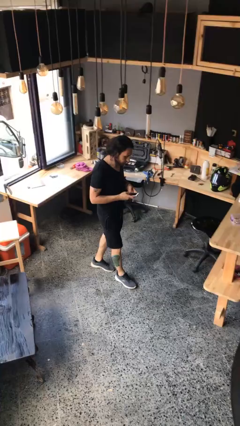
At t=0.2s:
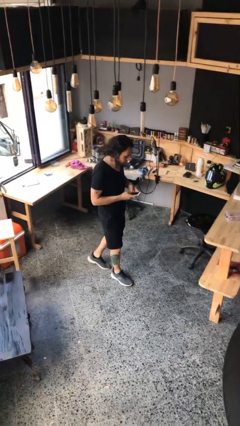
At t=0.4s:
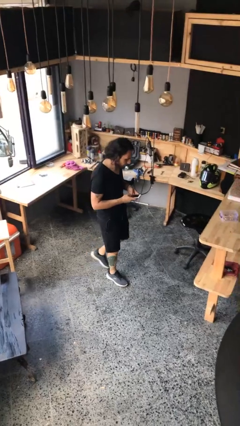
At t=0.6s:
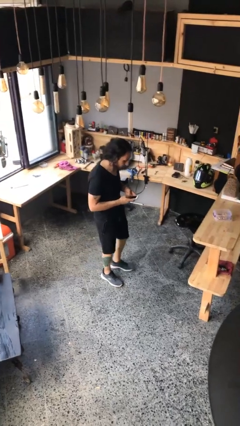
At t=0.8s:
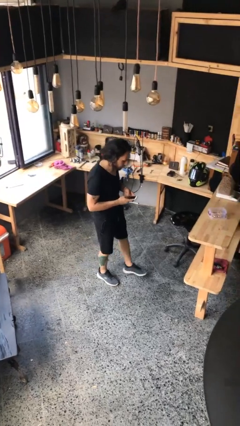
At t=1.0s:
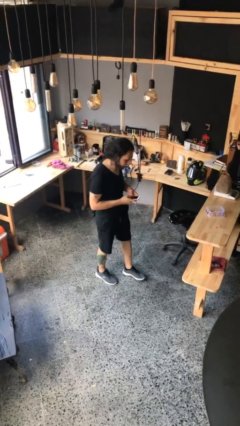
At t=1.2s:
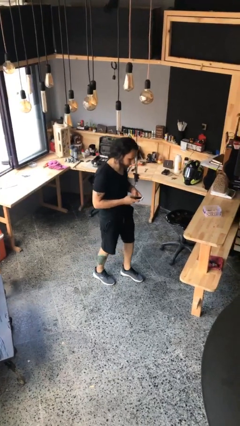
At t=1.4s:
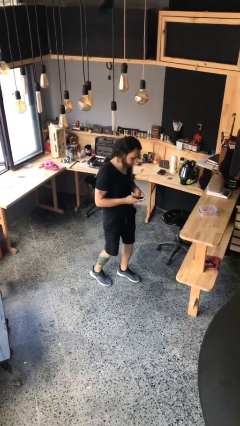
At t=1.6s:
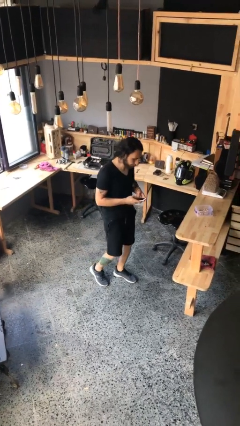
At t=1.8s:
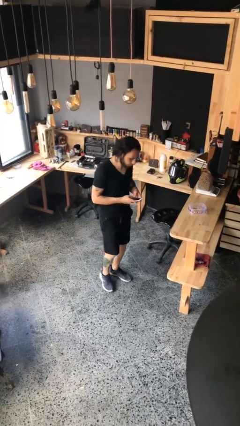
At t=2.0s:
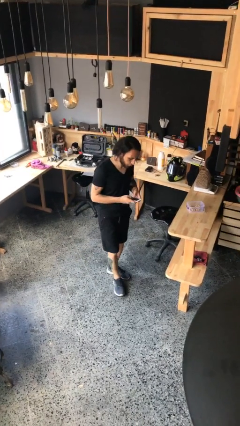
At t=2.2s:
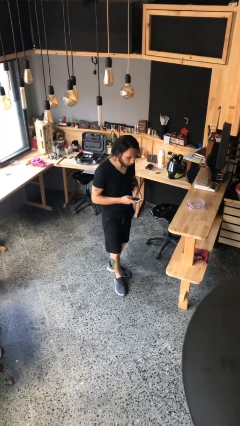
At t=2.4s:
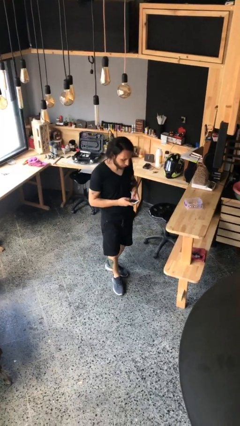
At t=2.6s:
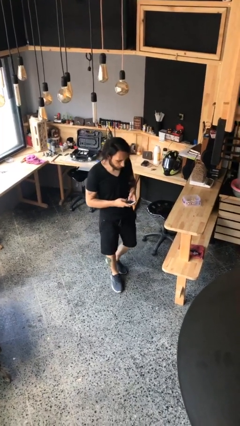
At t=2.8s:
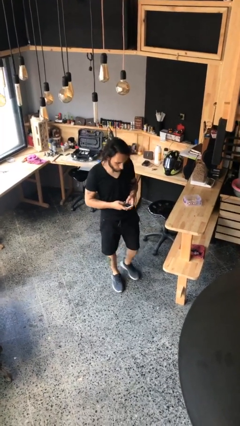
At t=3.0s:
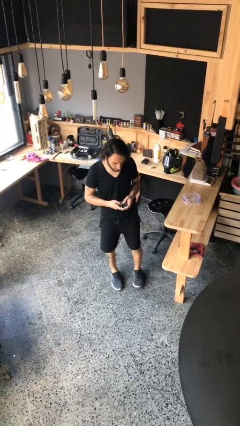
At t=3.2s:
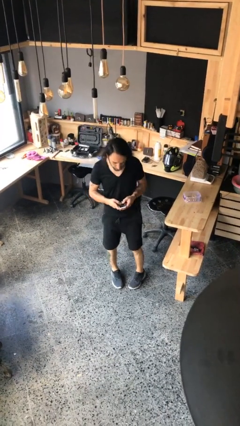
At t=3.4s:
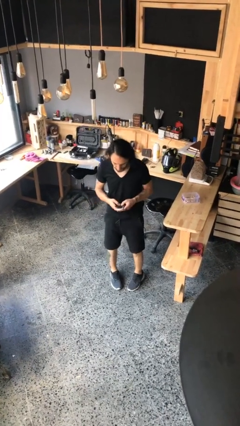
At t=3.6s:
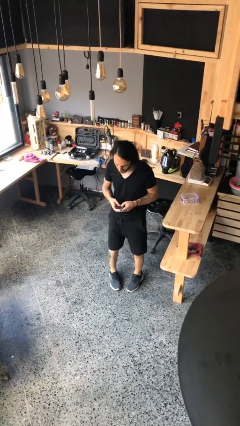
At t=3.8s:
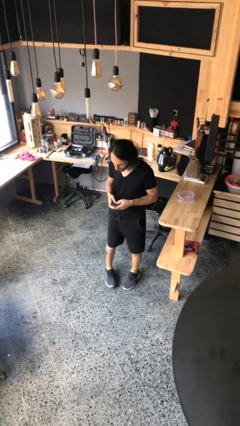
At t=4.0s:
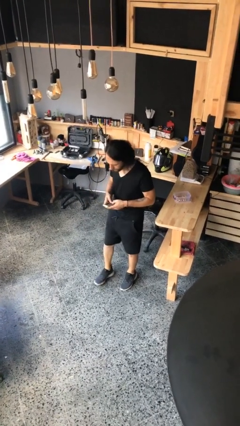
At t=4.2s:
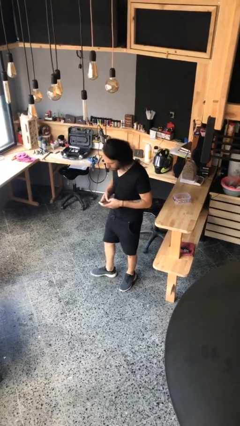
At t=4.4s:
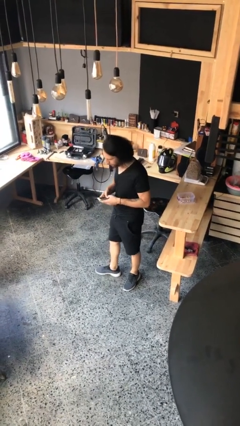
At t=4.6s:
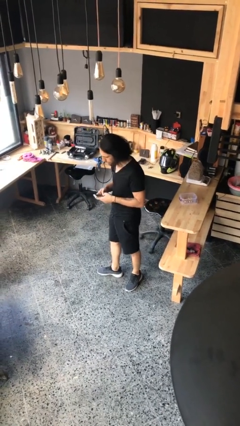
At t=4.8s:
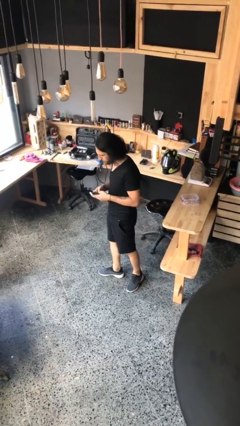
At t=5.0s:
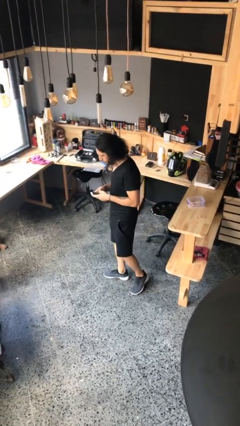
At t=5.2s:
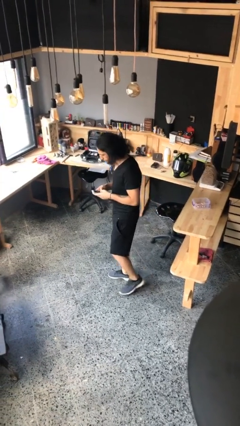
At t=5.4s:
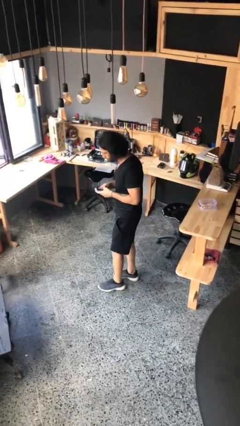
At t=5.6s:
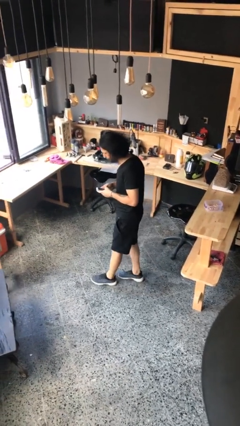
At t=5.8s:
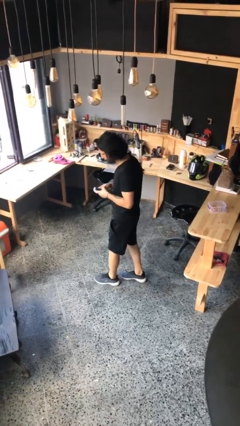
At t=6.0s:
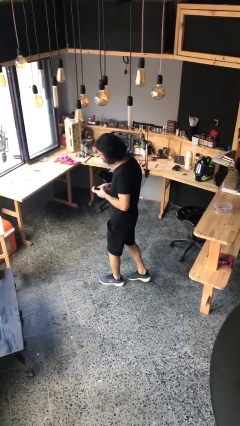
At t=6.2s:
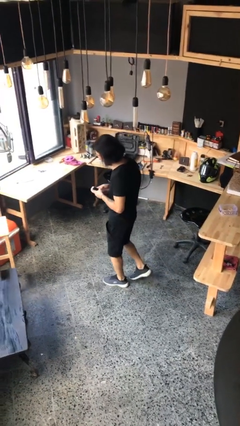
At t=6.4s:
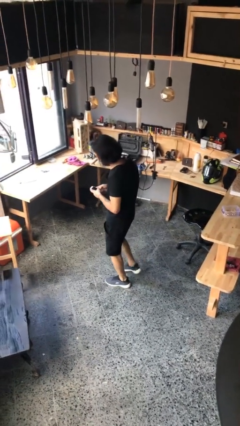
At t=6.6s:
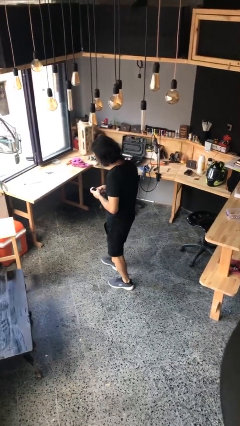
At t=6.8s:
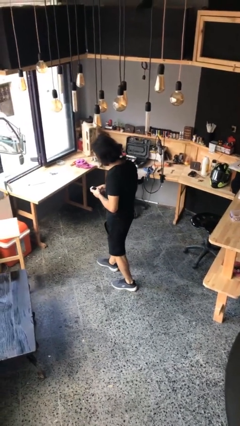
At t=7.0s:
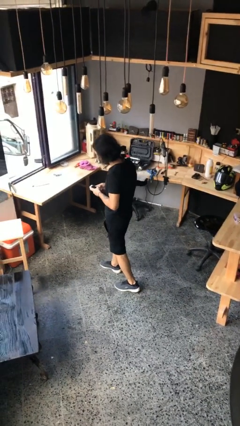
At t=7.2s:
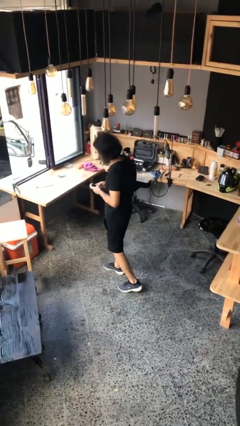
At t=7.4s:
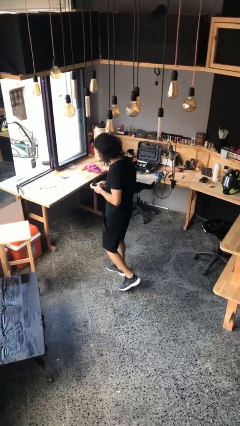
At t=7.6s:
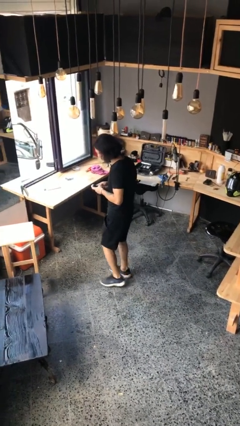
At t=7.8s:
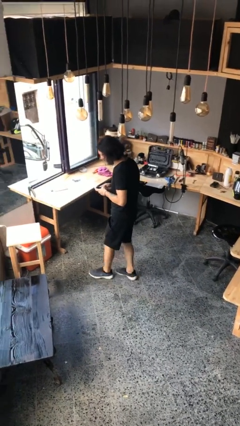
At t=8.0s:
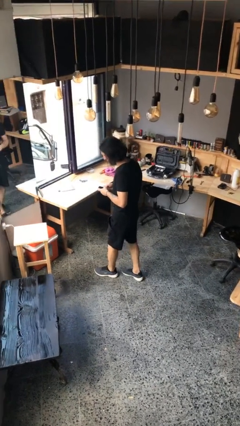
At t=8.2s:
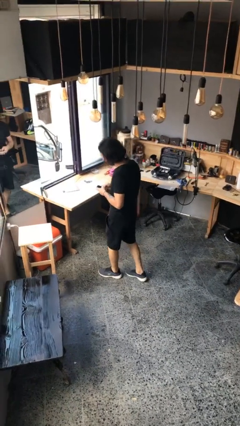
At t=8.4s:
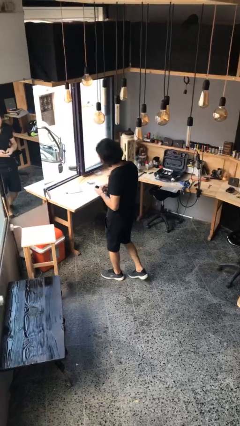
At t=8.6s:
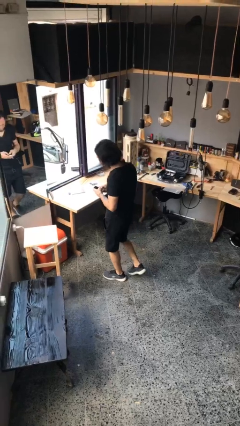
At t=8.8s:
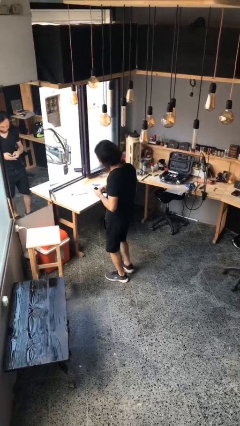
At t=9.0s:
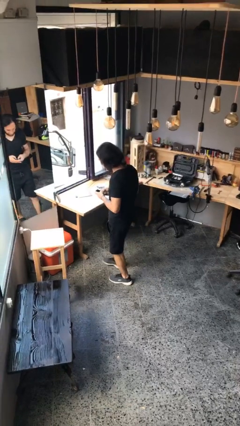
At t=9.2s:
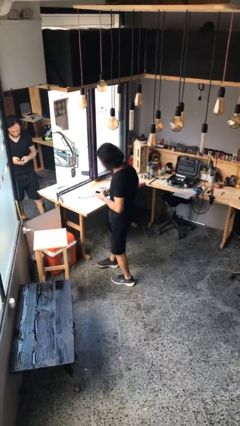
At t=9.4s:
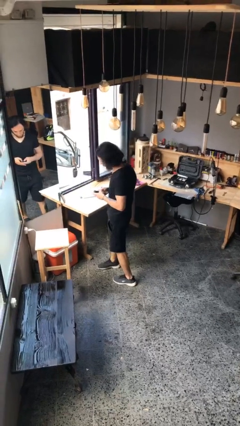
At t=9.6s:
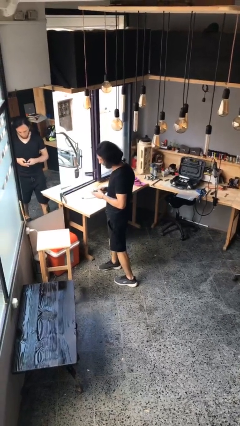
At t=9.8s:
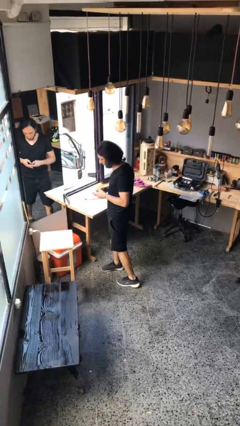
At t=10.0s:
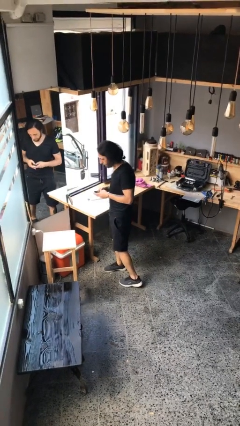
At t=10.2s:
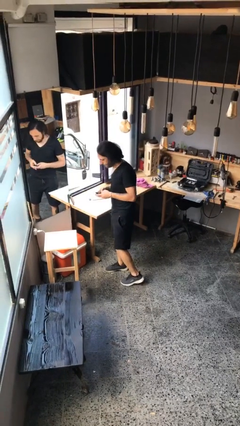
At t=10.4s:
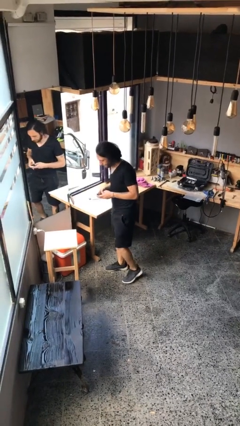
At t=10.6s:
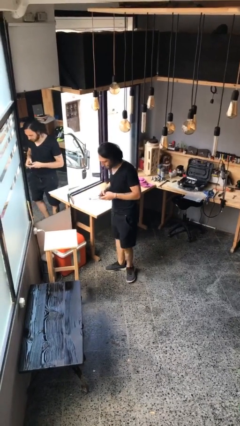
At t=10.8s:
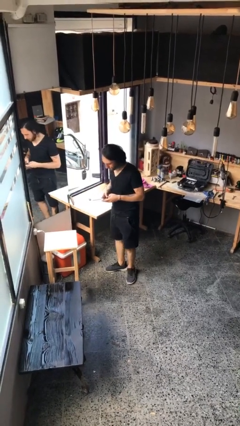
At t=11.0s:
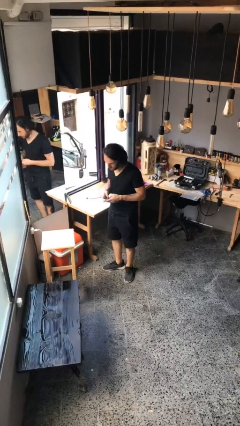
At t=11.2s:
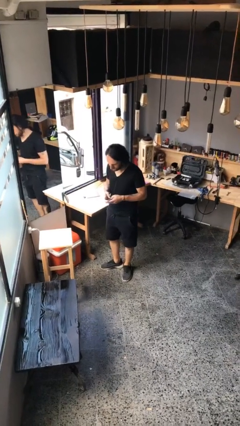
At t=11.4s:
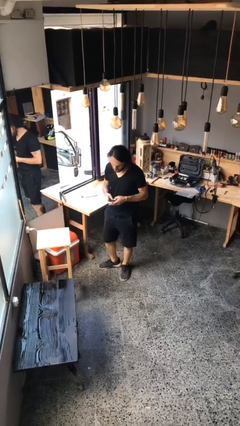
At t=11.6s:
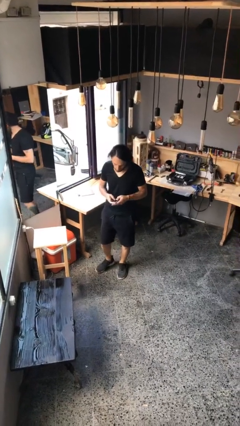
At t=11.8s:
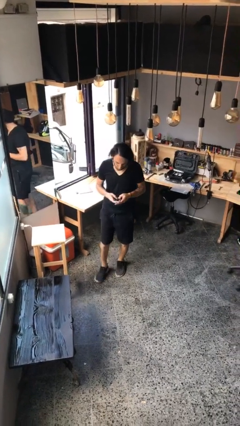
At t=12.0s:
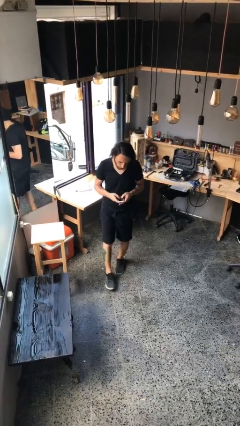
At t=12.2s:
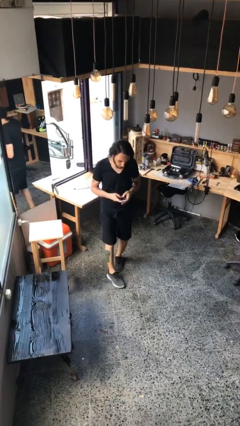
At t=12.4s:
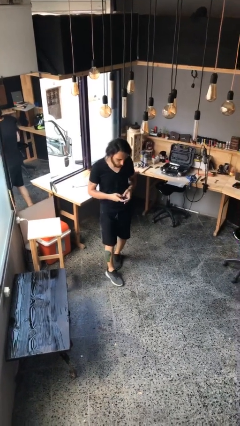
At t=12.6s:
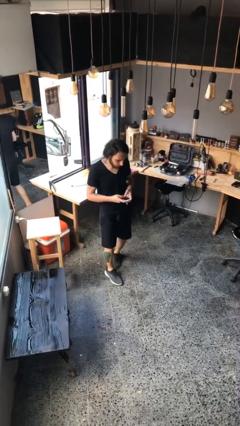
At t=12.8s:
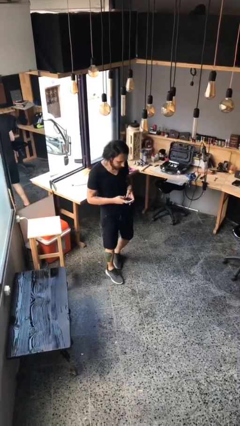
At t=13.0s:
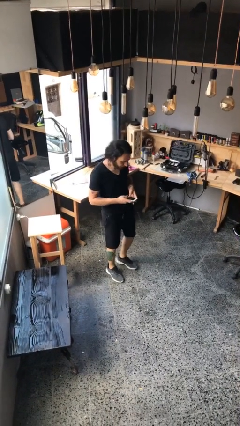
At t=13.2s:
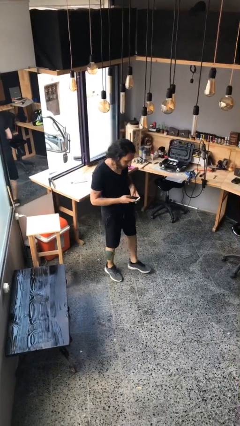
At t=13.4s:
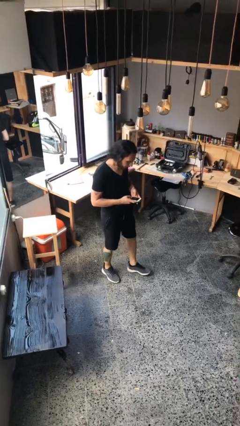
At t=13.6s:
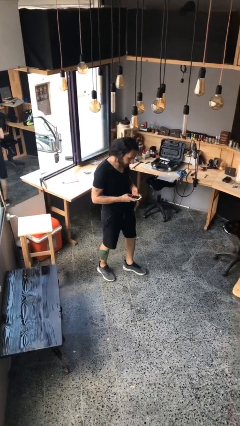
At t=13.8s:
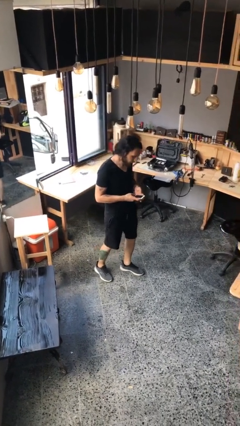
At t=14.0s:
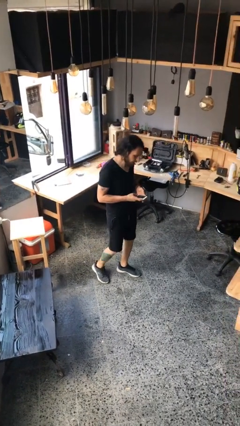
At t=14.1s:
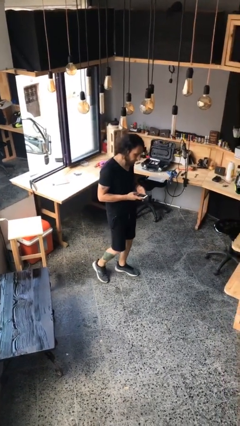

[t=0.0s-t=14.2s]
person texts on phone

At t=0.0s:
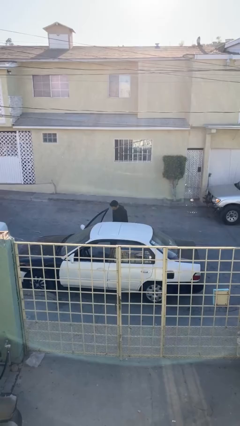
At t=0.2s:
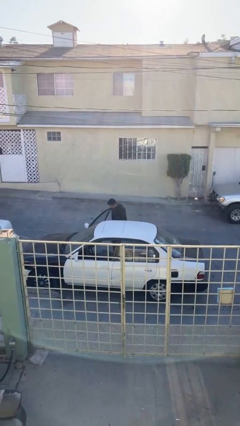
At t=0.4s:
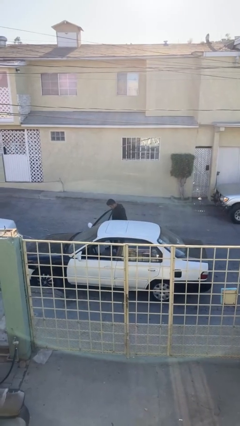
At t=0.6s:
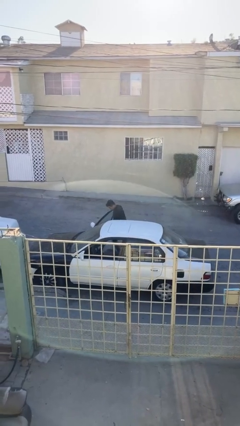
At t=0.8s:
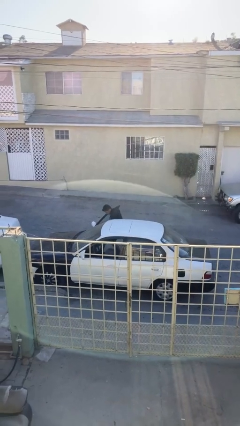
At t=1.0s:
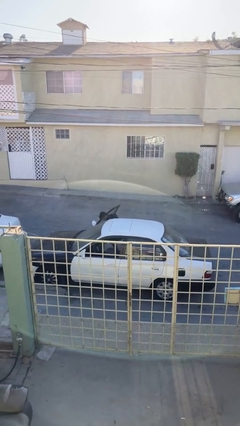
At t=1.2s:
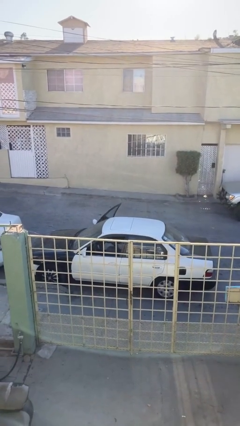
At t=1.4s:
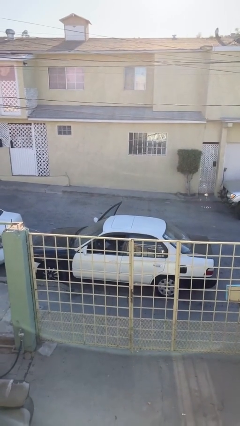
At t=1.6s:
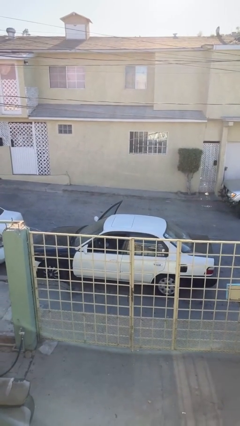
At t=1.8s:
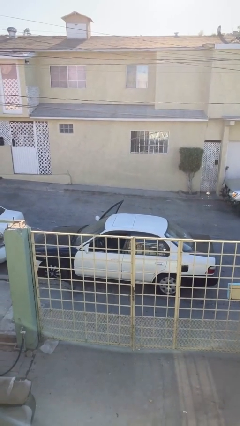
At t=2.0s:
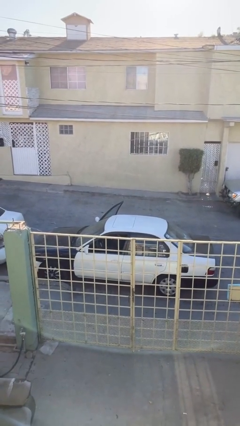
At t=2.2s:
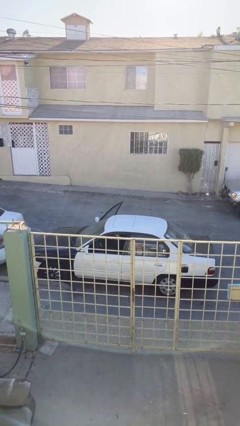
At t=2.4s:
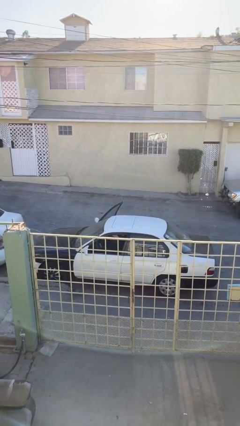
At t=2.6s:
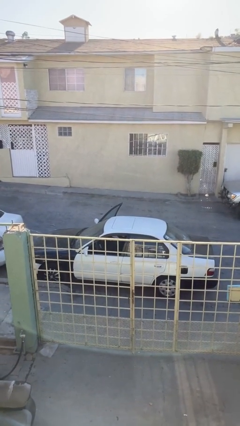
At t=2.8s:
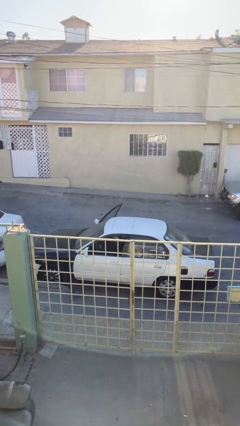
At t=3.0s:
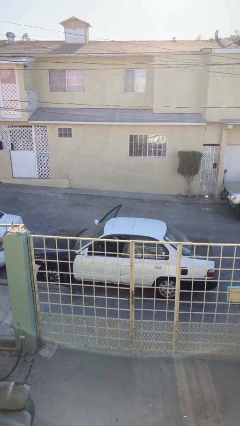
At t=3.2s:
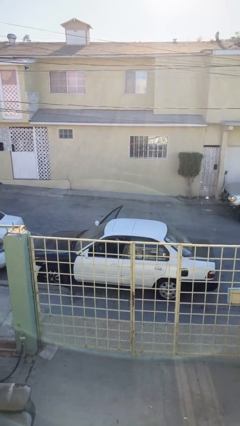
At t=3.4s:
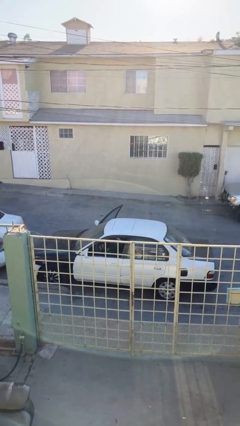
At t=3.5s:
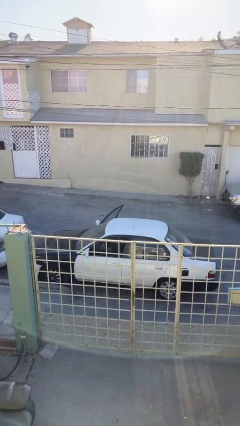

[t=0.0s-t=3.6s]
person enters car

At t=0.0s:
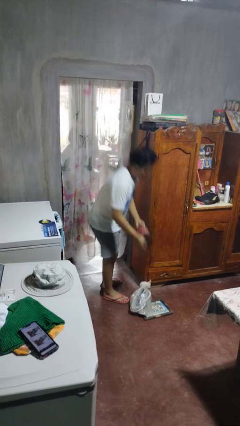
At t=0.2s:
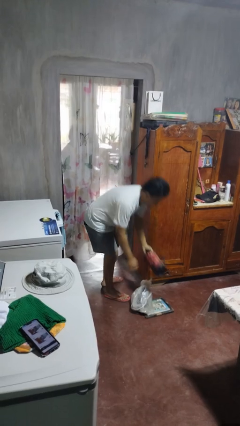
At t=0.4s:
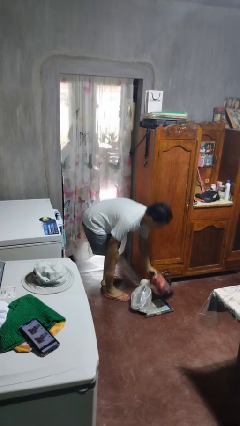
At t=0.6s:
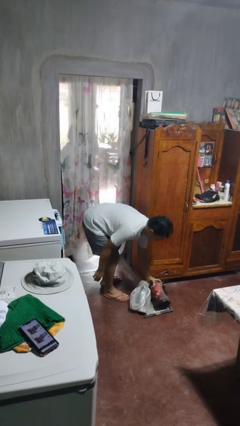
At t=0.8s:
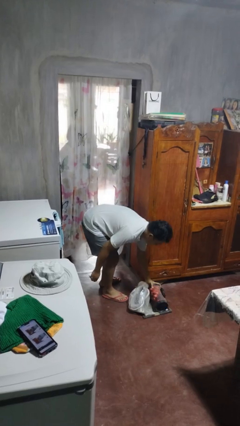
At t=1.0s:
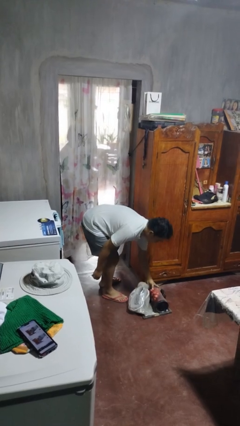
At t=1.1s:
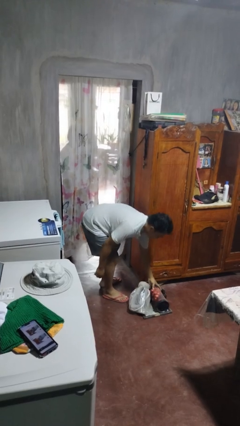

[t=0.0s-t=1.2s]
person puts down object on shelf
